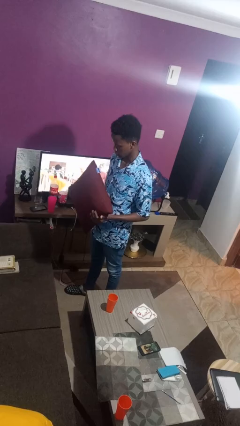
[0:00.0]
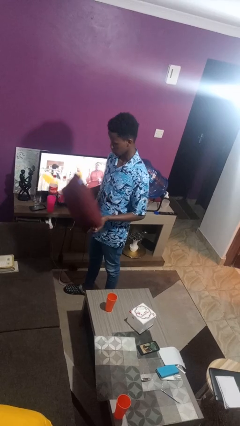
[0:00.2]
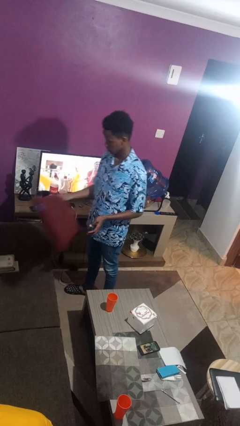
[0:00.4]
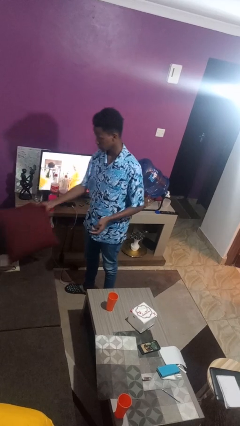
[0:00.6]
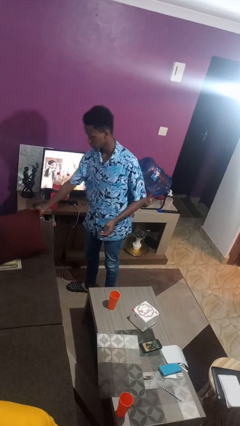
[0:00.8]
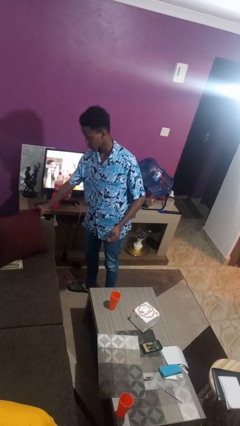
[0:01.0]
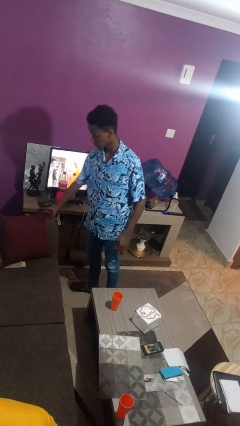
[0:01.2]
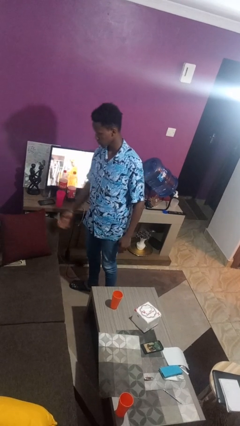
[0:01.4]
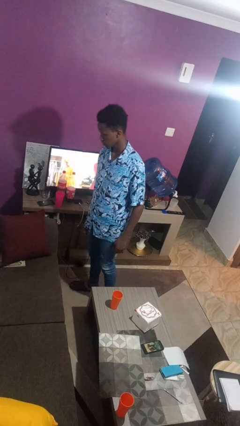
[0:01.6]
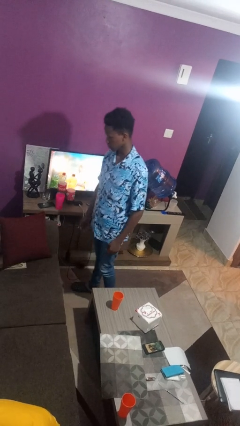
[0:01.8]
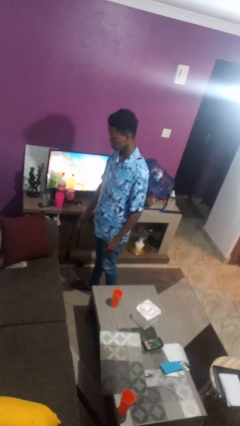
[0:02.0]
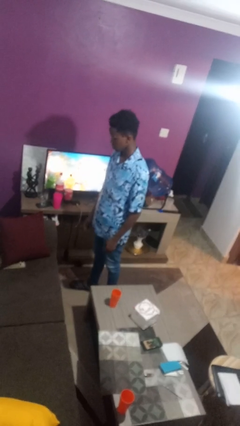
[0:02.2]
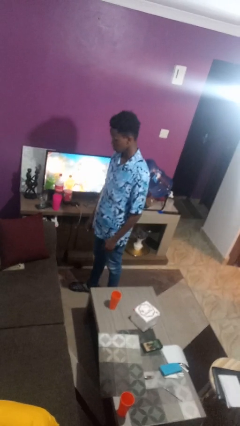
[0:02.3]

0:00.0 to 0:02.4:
person puts down object on couch

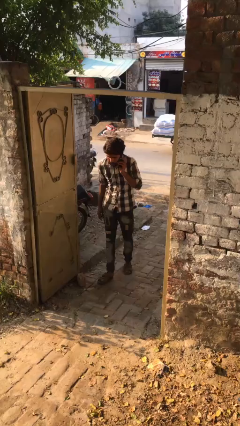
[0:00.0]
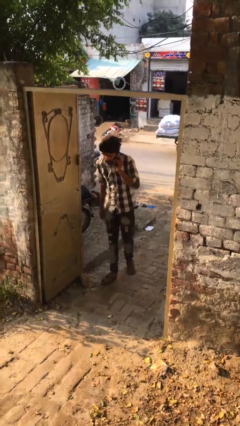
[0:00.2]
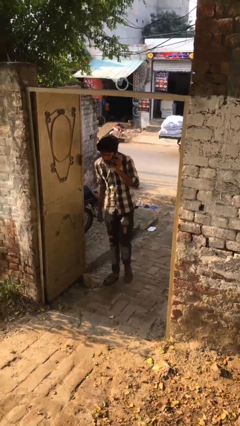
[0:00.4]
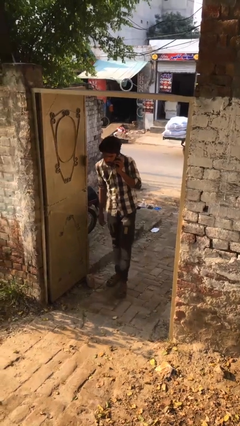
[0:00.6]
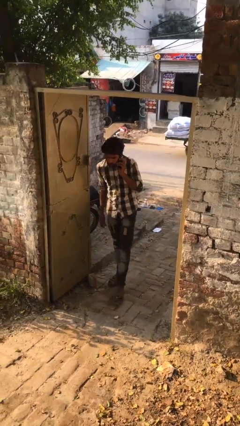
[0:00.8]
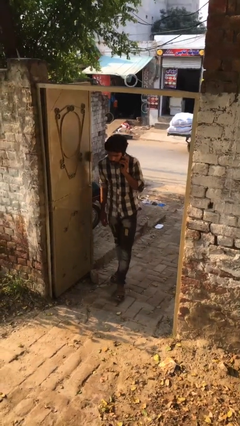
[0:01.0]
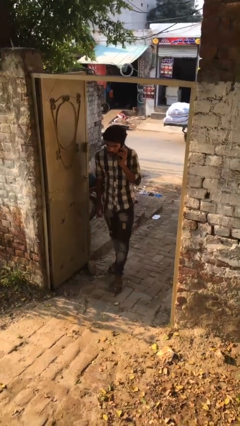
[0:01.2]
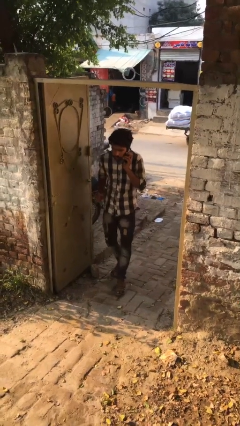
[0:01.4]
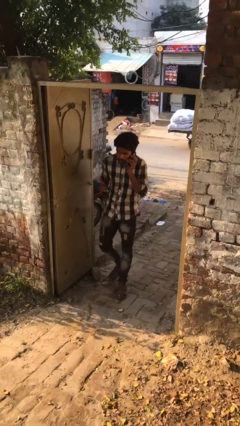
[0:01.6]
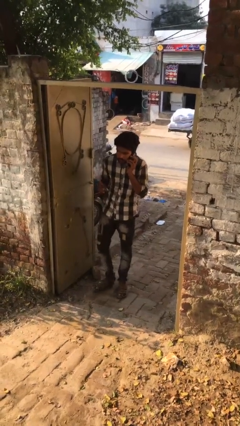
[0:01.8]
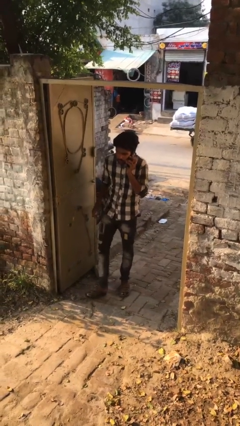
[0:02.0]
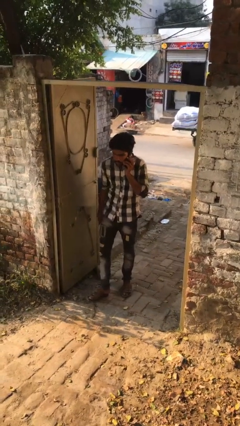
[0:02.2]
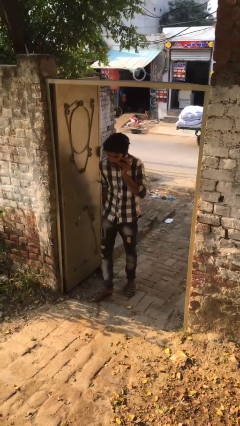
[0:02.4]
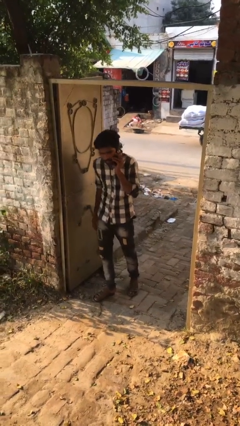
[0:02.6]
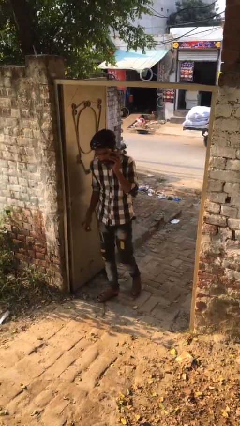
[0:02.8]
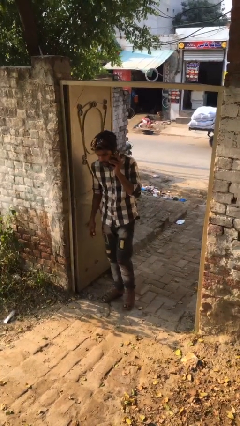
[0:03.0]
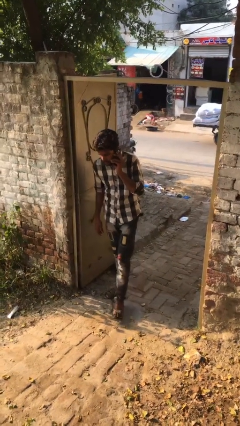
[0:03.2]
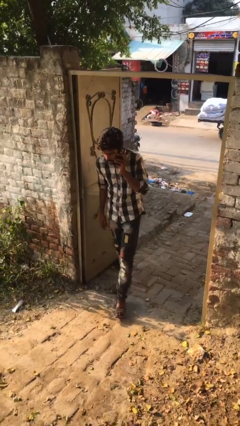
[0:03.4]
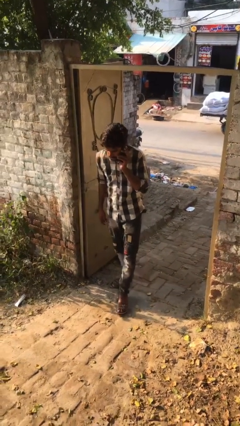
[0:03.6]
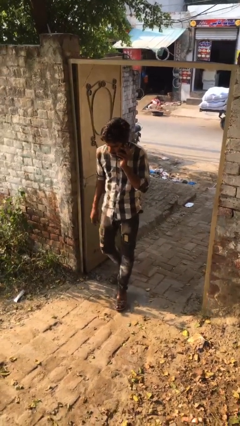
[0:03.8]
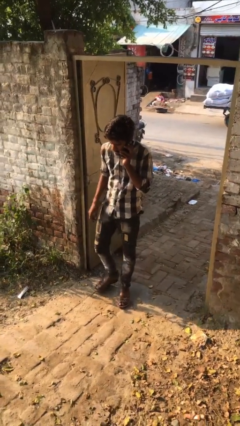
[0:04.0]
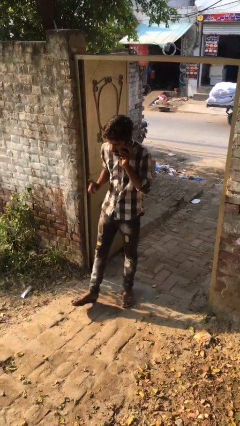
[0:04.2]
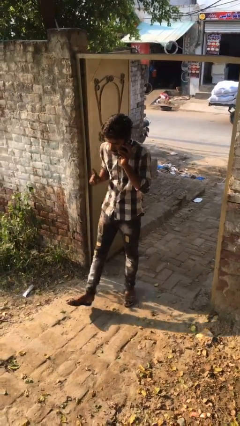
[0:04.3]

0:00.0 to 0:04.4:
person enters scene through structure

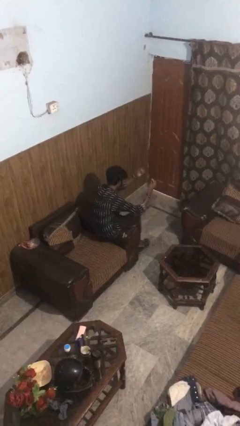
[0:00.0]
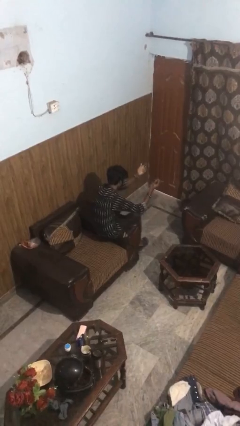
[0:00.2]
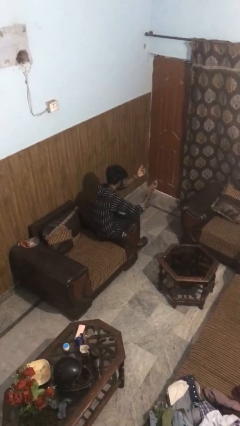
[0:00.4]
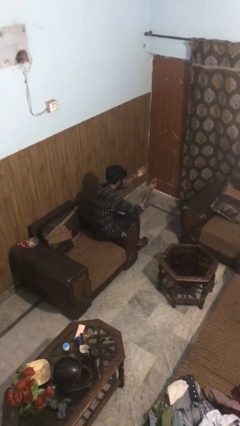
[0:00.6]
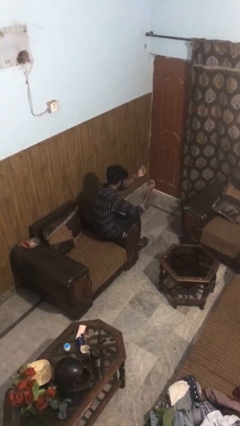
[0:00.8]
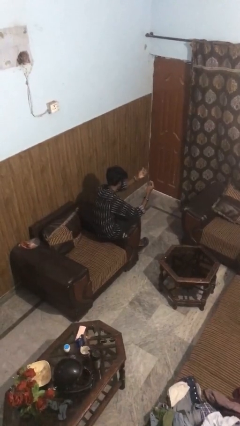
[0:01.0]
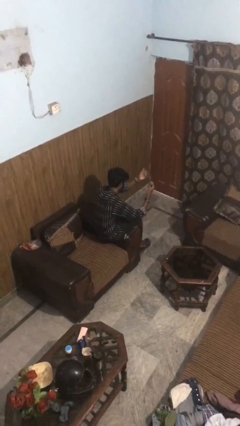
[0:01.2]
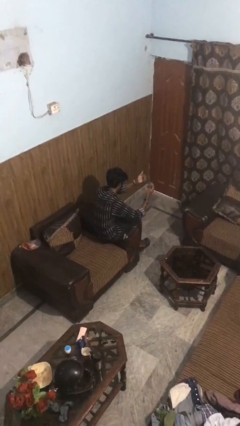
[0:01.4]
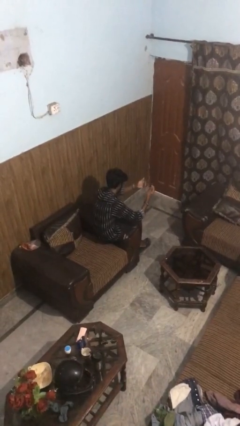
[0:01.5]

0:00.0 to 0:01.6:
person snaps fingers

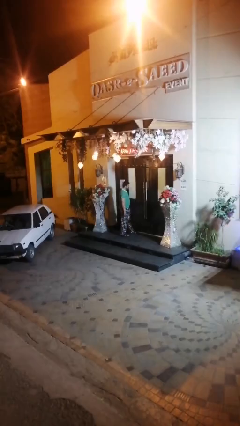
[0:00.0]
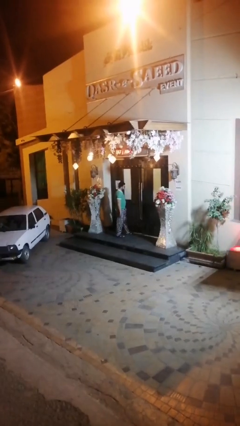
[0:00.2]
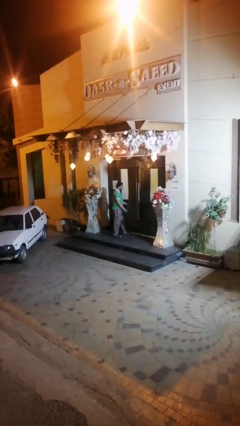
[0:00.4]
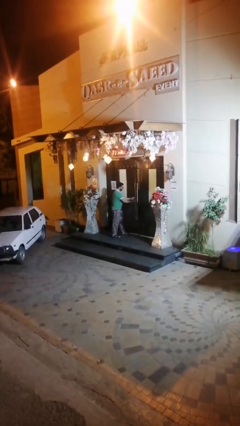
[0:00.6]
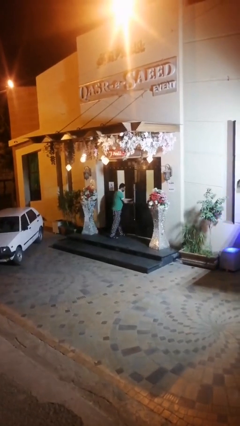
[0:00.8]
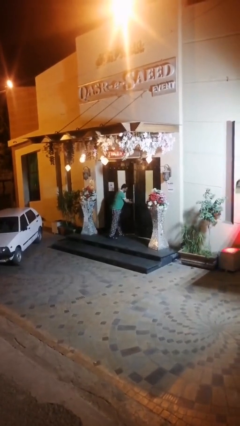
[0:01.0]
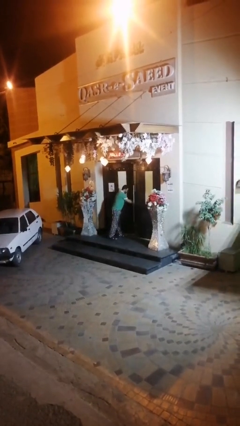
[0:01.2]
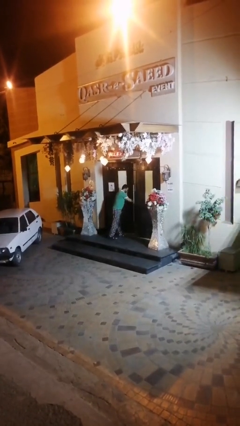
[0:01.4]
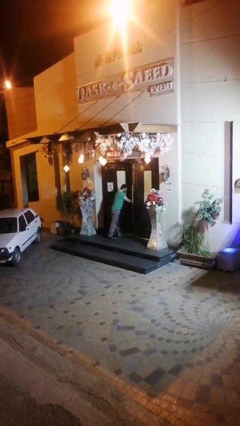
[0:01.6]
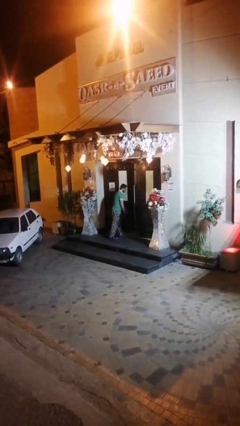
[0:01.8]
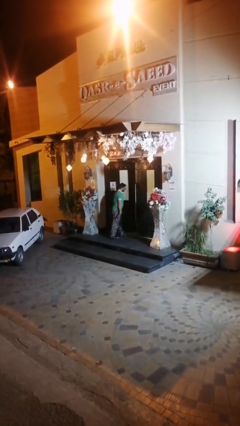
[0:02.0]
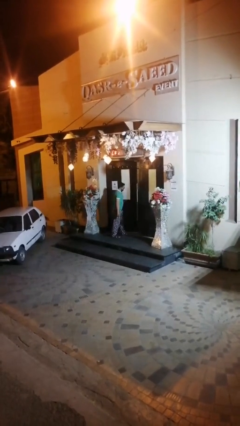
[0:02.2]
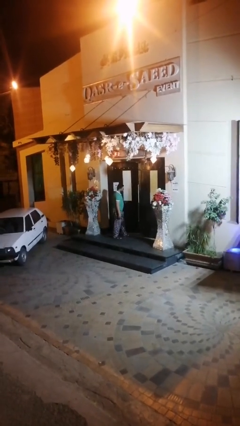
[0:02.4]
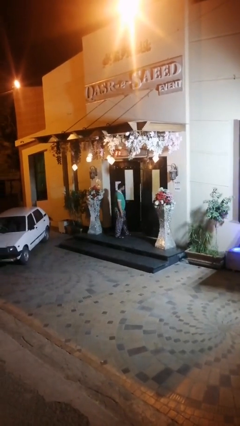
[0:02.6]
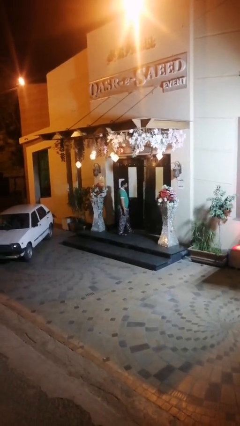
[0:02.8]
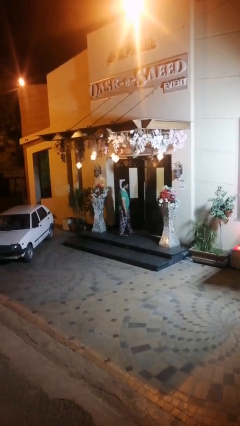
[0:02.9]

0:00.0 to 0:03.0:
person opens facility door

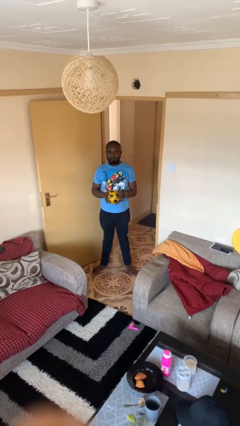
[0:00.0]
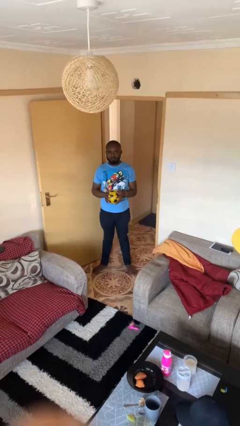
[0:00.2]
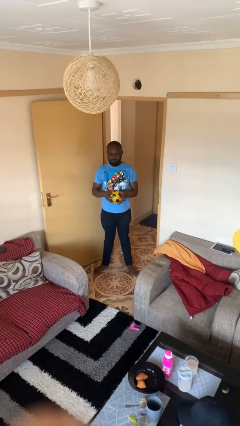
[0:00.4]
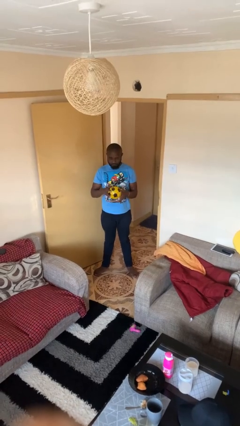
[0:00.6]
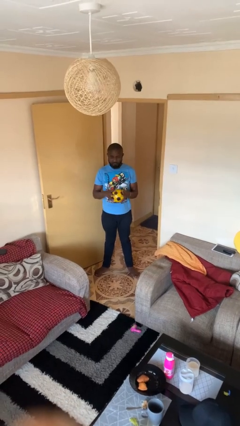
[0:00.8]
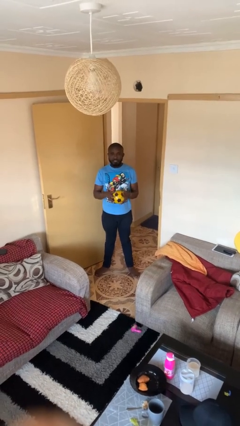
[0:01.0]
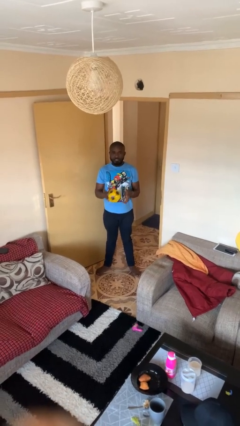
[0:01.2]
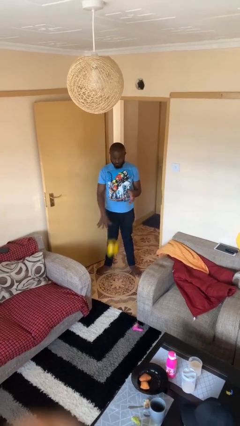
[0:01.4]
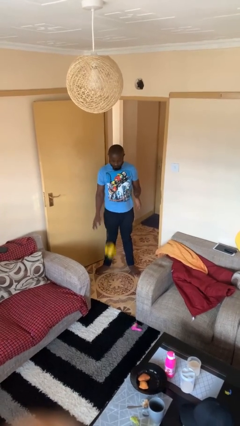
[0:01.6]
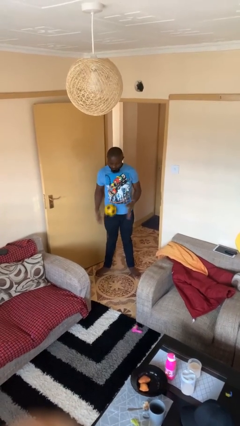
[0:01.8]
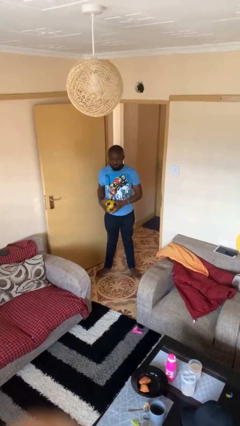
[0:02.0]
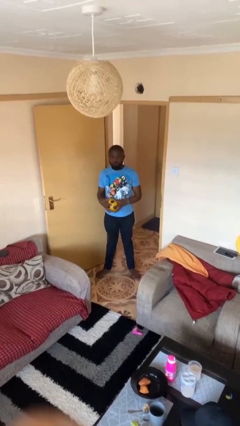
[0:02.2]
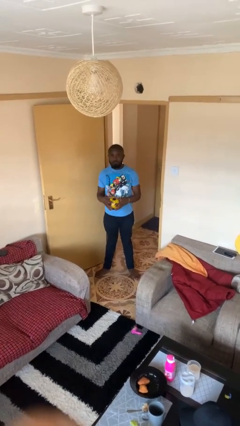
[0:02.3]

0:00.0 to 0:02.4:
person bounces ball on floor

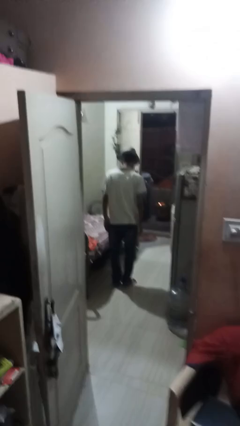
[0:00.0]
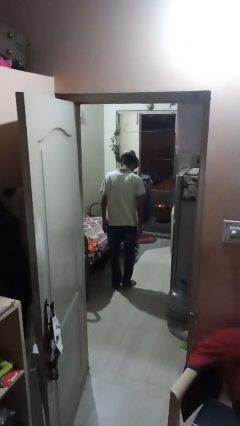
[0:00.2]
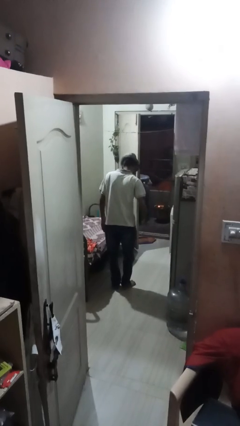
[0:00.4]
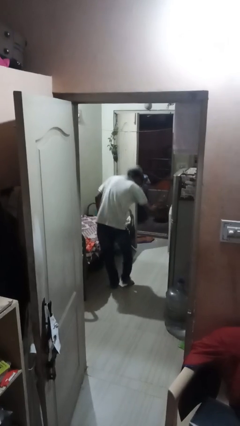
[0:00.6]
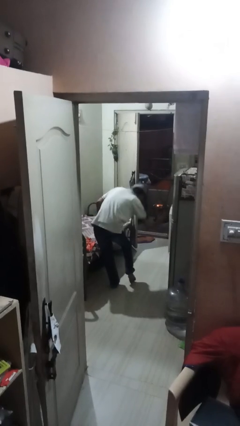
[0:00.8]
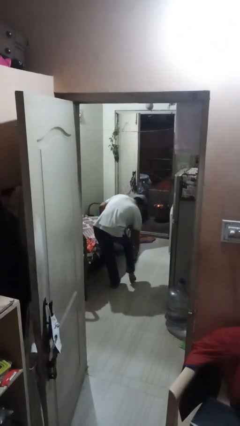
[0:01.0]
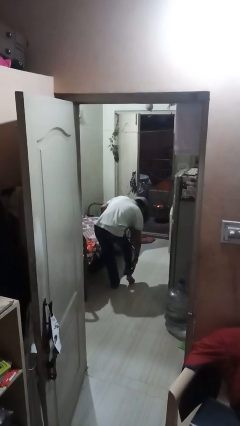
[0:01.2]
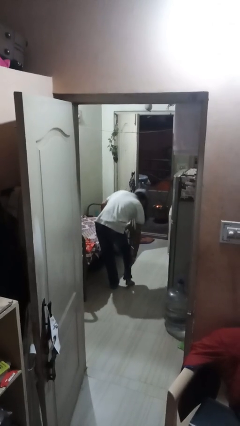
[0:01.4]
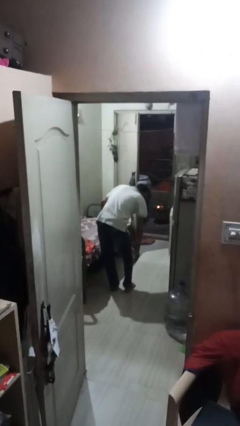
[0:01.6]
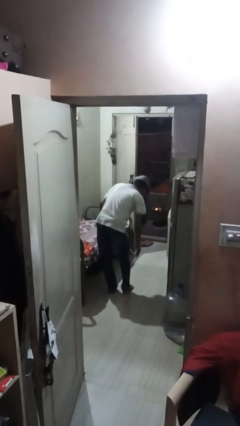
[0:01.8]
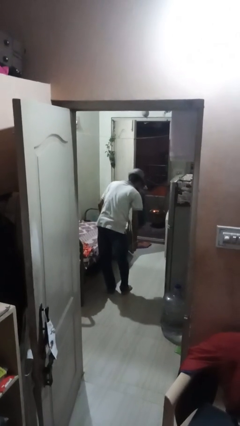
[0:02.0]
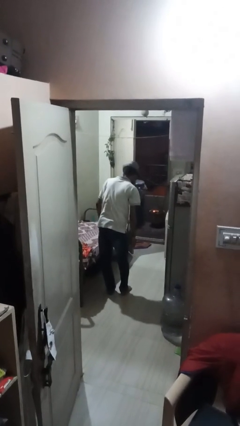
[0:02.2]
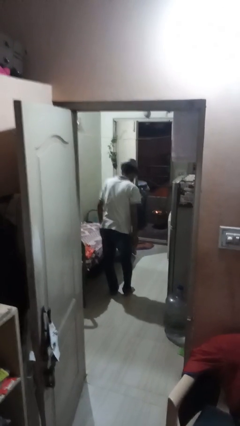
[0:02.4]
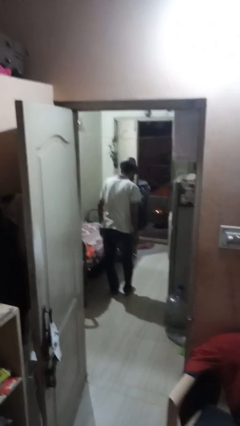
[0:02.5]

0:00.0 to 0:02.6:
person swats bug

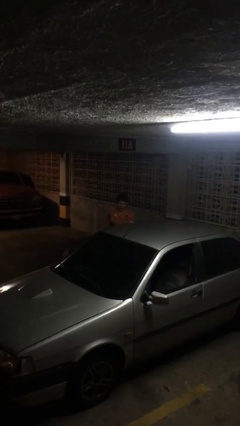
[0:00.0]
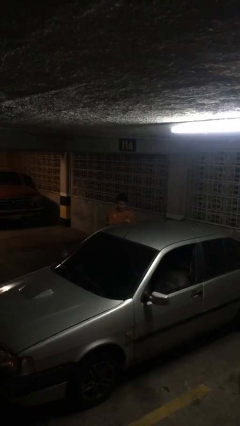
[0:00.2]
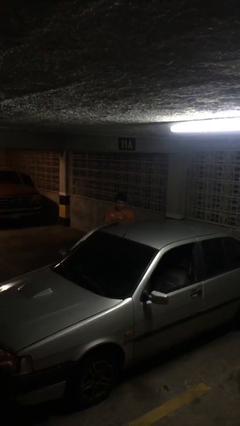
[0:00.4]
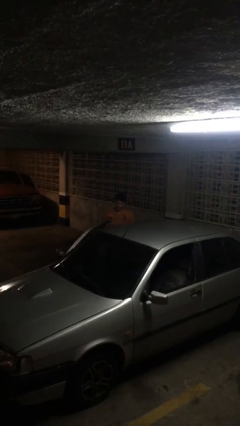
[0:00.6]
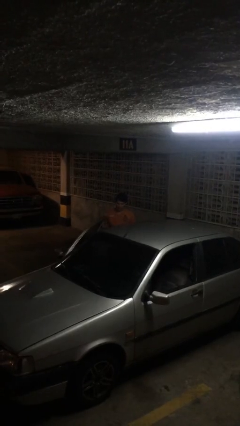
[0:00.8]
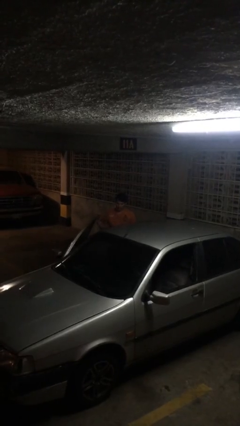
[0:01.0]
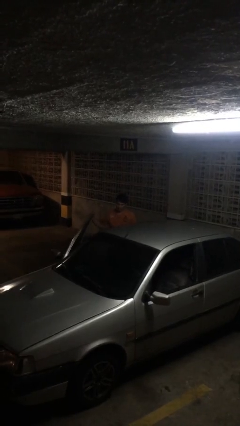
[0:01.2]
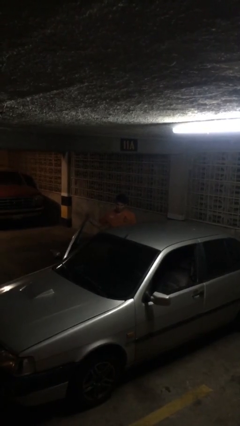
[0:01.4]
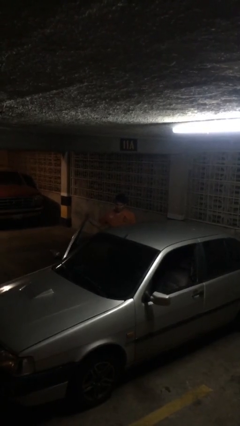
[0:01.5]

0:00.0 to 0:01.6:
person opens car door
